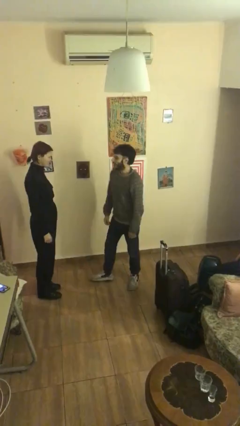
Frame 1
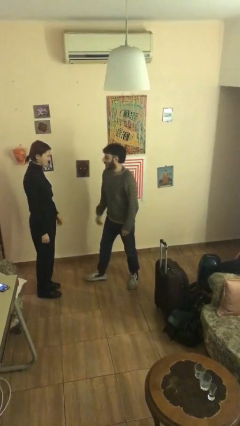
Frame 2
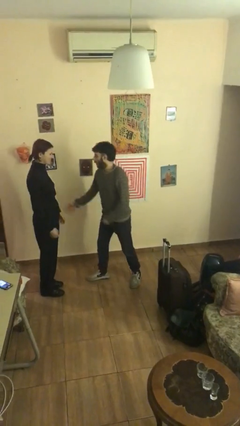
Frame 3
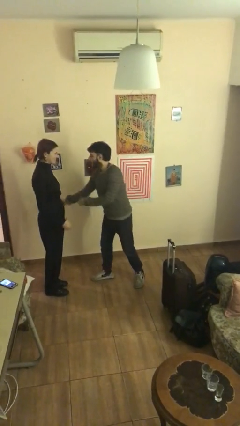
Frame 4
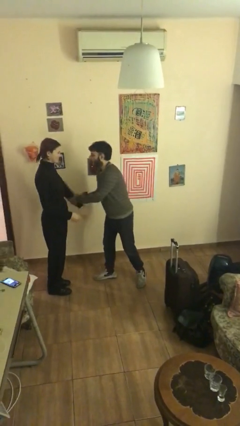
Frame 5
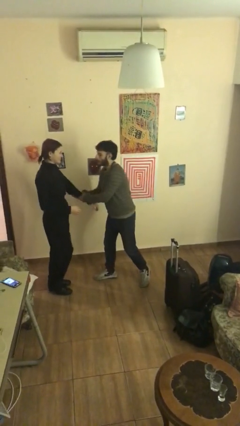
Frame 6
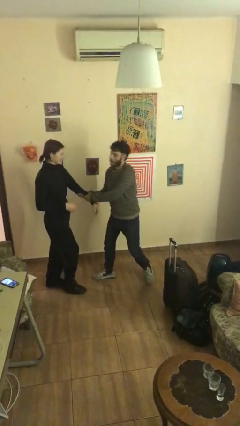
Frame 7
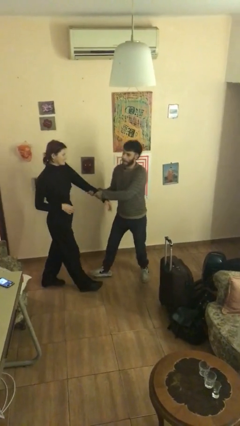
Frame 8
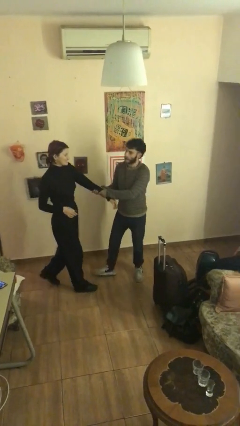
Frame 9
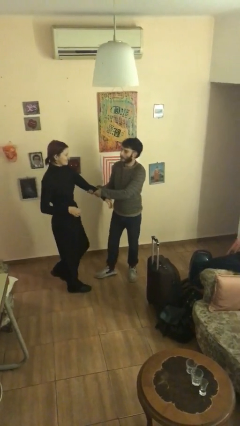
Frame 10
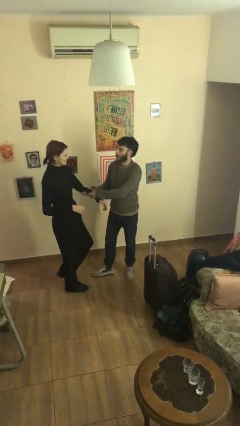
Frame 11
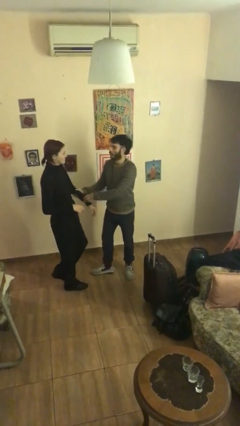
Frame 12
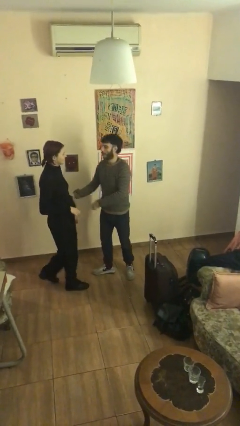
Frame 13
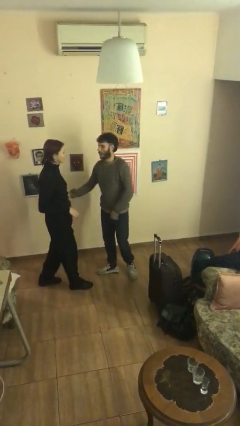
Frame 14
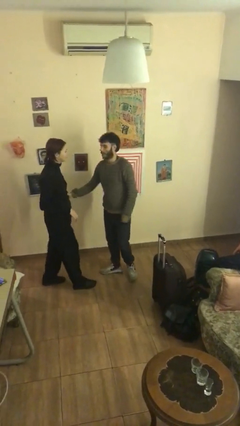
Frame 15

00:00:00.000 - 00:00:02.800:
person grabs person by forearm

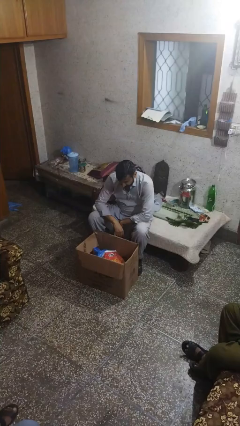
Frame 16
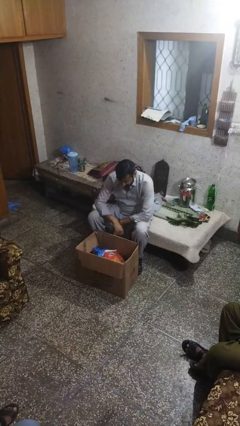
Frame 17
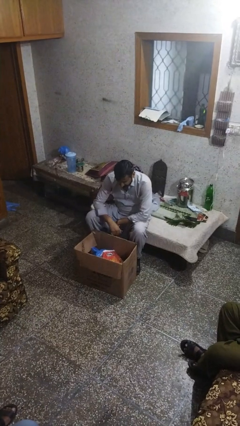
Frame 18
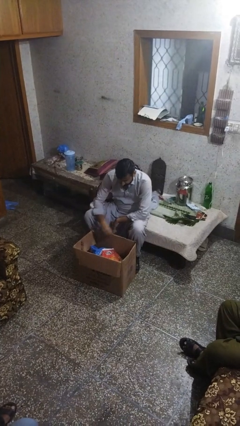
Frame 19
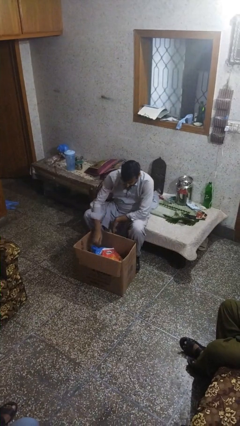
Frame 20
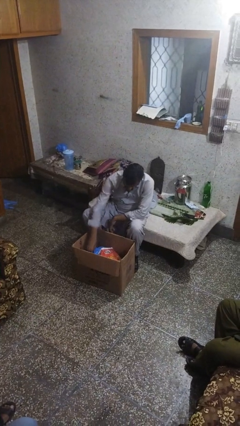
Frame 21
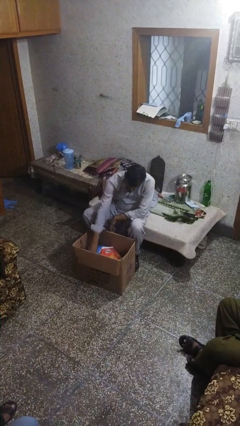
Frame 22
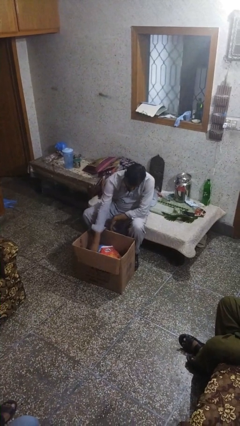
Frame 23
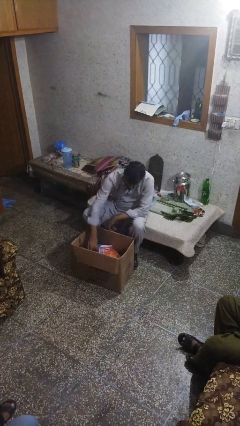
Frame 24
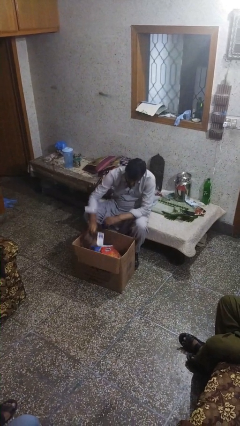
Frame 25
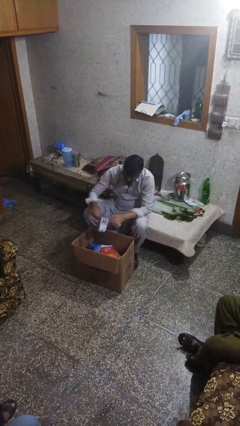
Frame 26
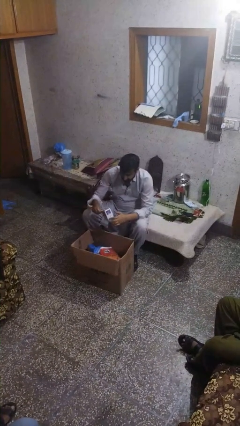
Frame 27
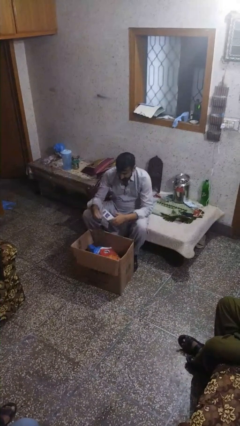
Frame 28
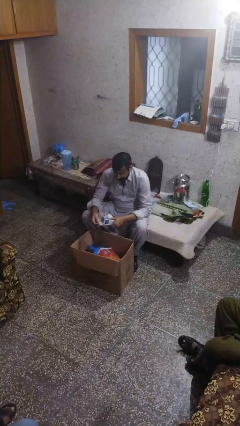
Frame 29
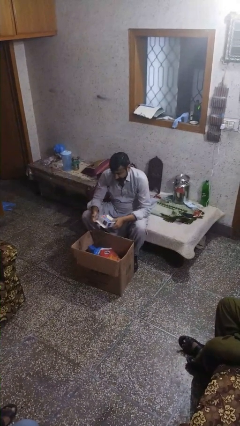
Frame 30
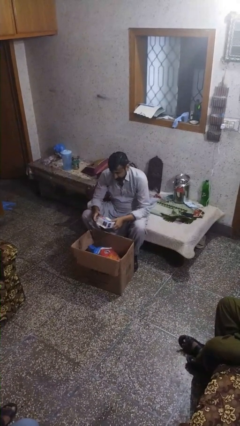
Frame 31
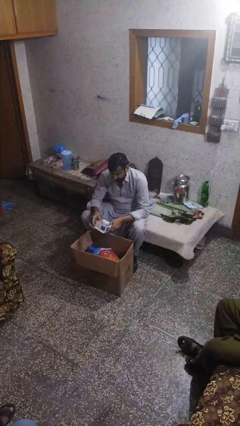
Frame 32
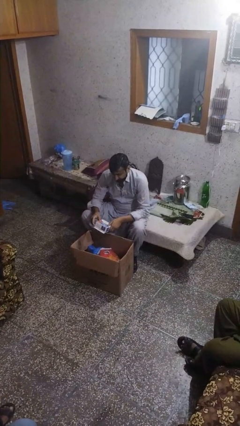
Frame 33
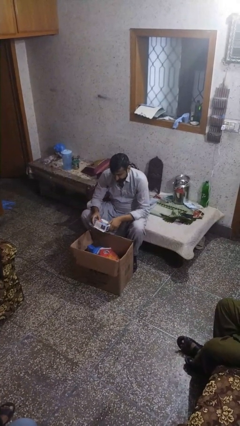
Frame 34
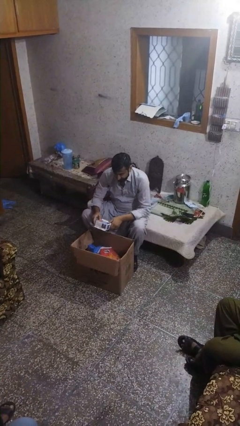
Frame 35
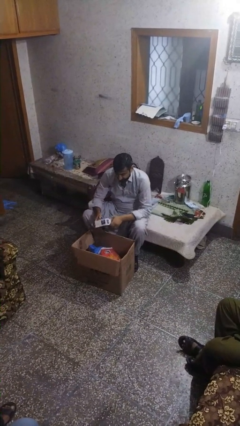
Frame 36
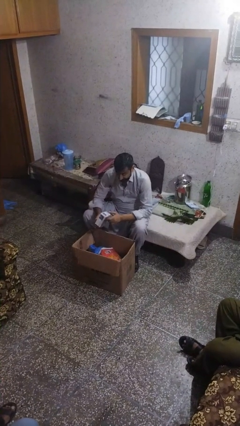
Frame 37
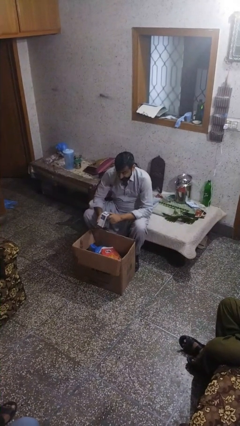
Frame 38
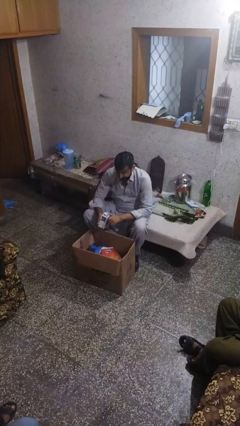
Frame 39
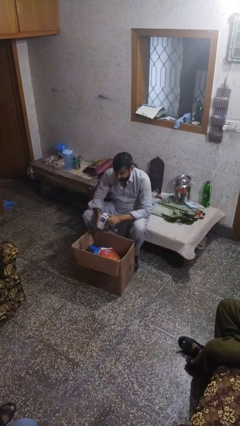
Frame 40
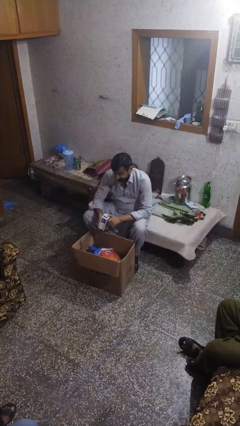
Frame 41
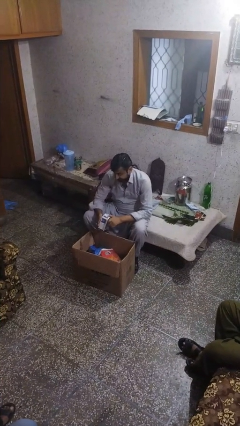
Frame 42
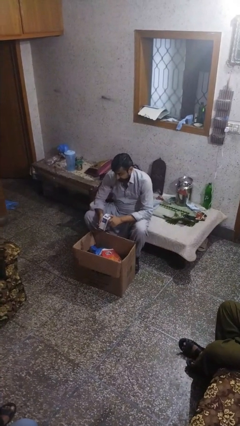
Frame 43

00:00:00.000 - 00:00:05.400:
person takes object from box

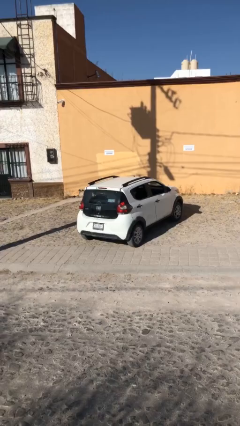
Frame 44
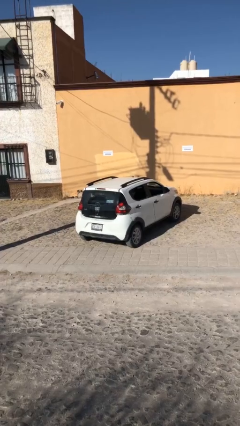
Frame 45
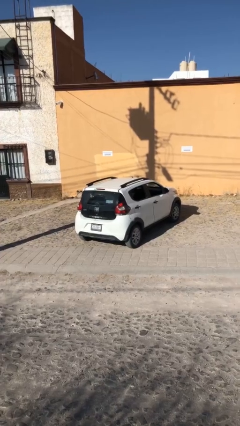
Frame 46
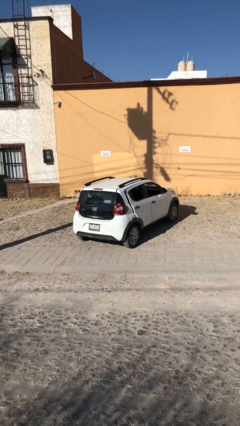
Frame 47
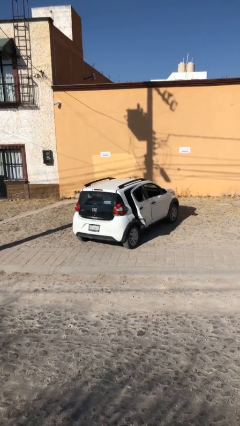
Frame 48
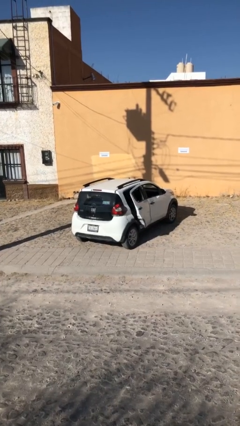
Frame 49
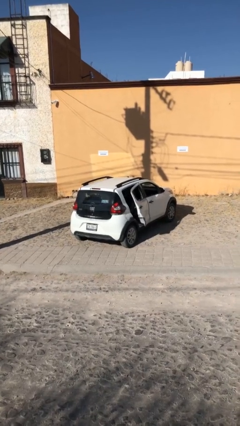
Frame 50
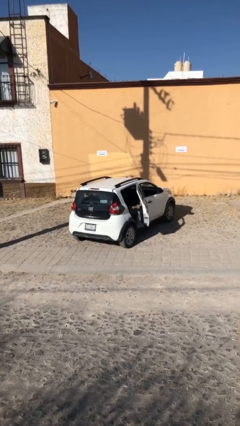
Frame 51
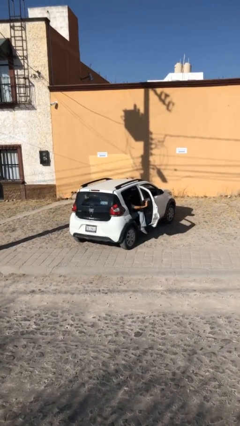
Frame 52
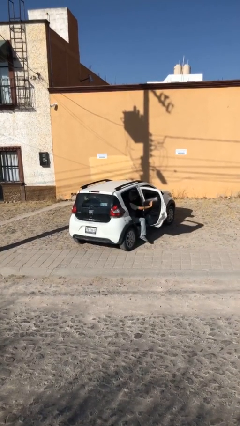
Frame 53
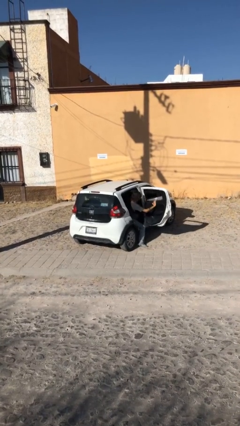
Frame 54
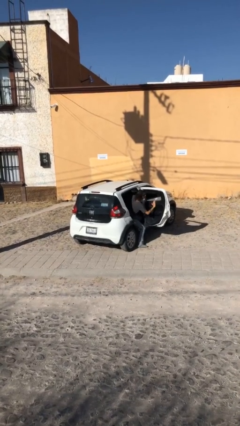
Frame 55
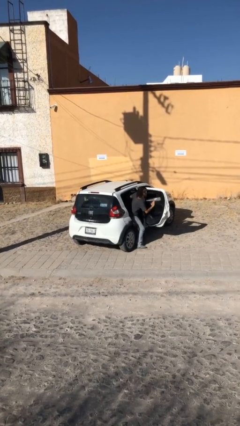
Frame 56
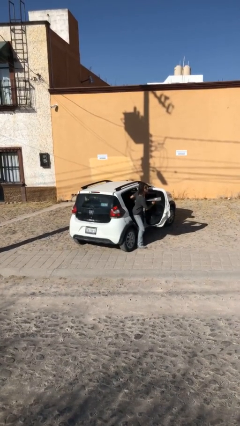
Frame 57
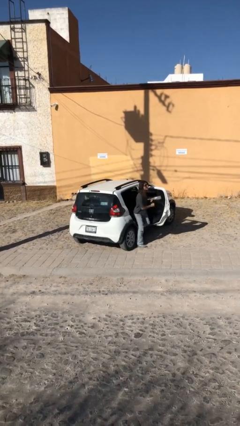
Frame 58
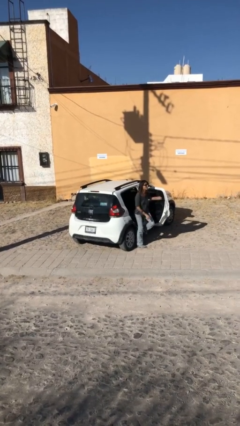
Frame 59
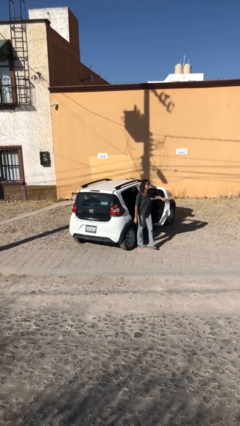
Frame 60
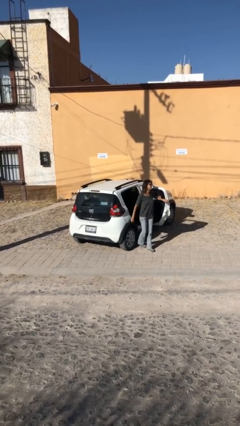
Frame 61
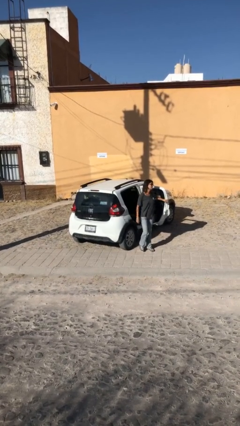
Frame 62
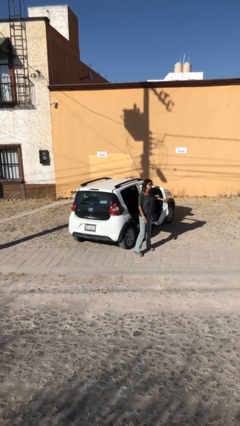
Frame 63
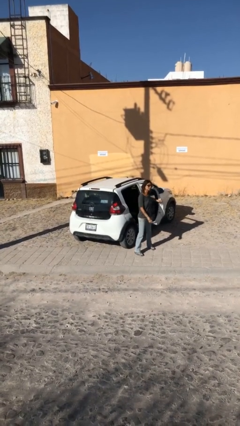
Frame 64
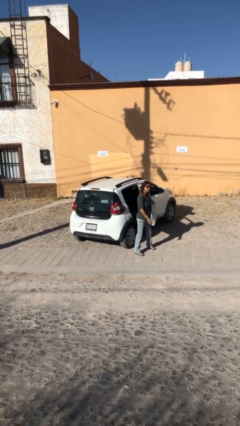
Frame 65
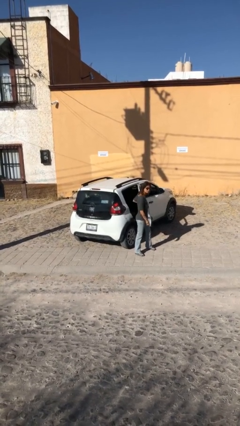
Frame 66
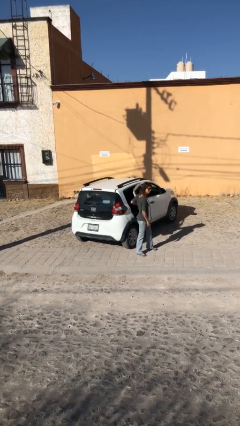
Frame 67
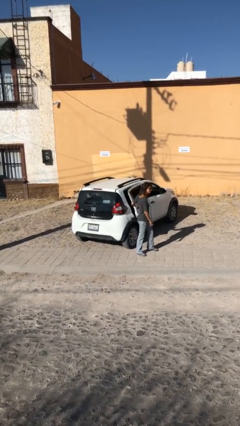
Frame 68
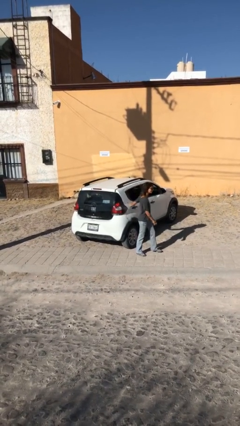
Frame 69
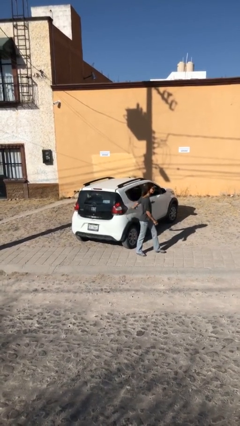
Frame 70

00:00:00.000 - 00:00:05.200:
car drops off person

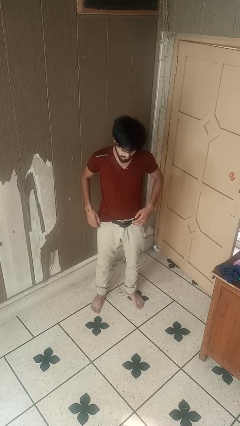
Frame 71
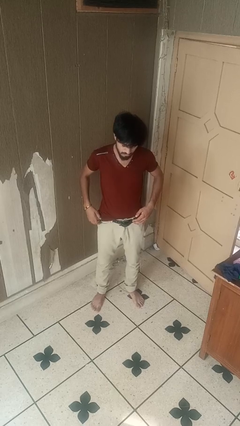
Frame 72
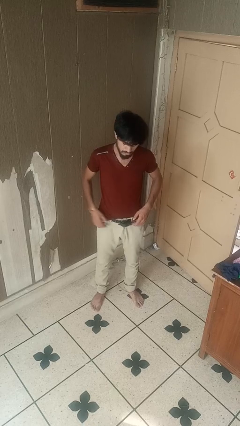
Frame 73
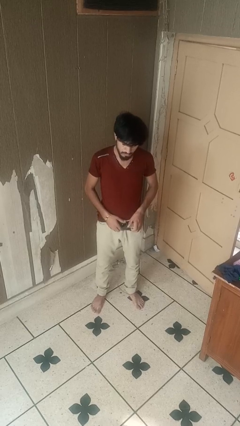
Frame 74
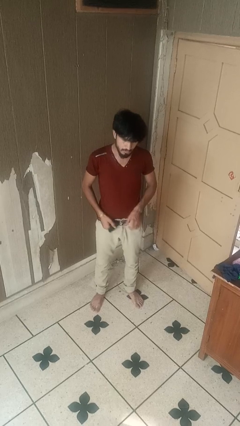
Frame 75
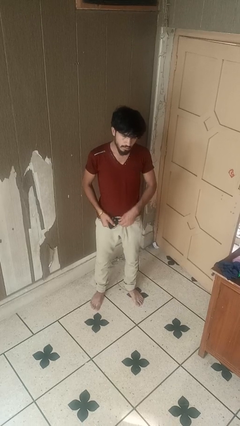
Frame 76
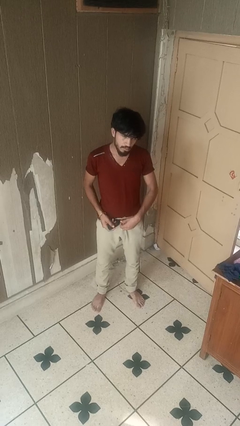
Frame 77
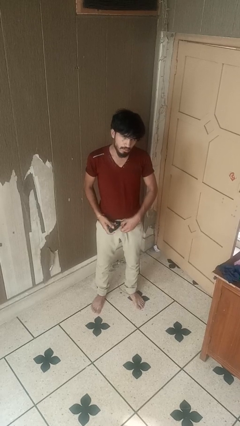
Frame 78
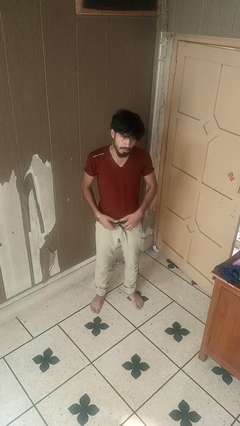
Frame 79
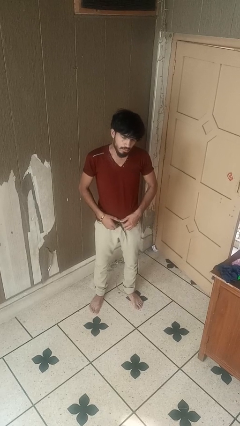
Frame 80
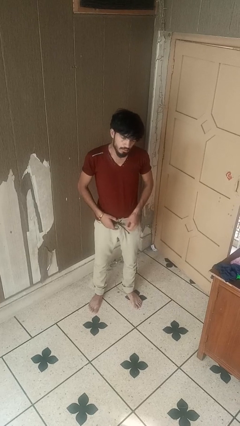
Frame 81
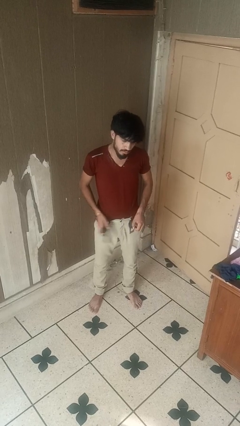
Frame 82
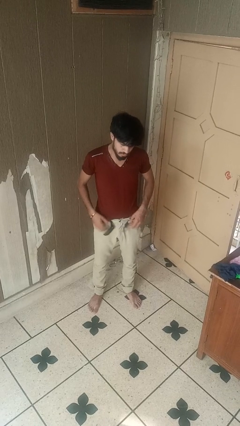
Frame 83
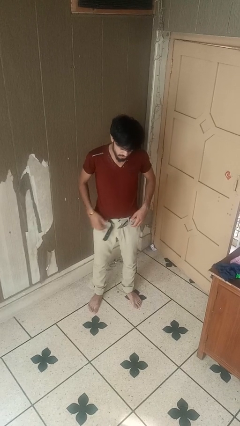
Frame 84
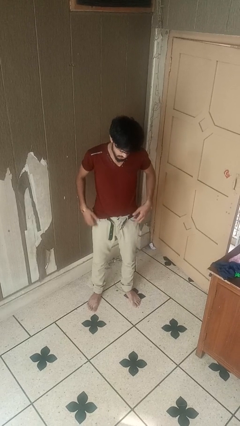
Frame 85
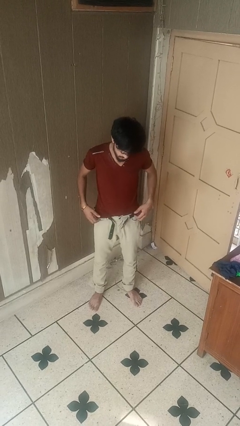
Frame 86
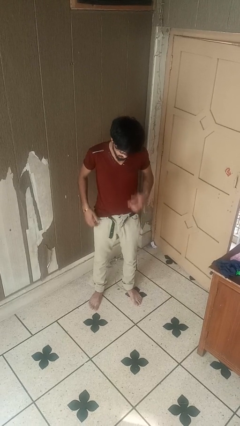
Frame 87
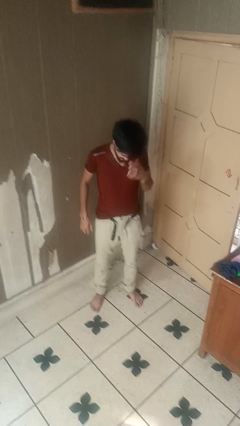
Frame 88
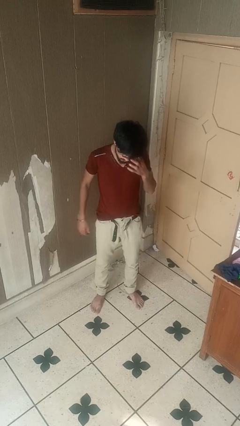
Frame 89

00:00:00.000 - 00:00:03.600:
person takes off belt

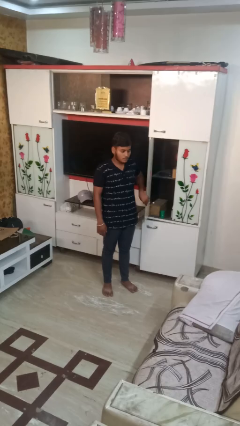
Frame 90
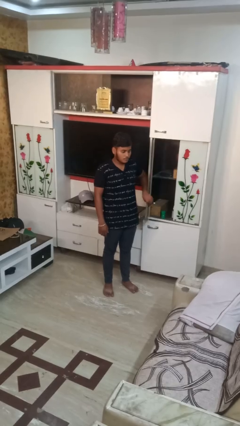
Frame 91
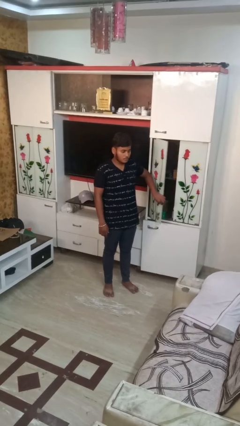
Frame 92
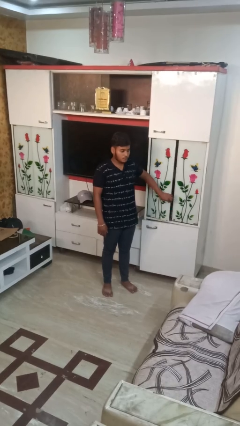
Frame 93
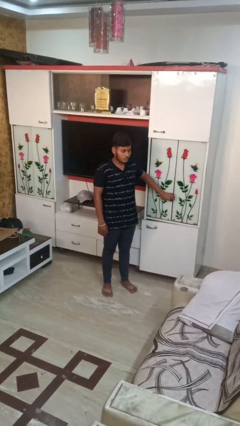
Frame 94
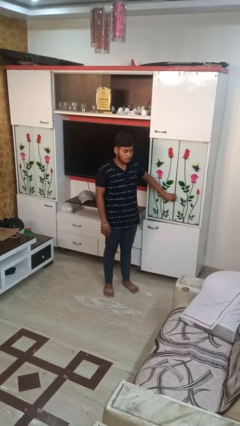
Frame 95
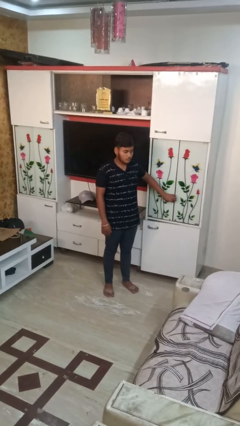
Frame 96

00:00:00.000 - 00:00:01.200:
person closes closet door
